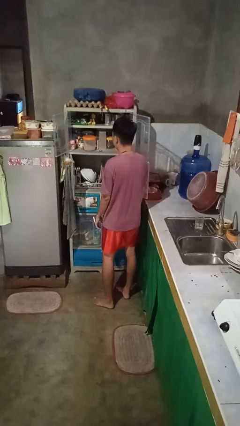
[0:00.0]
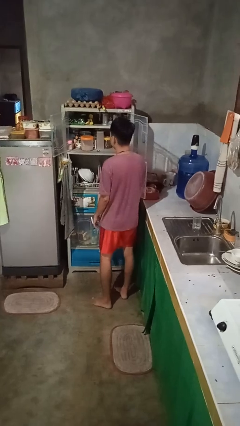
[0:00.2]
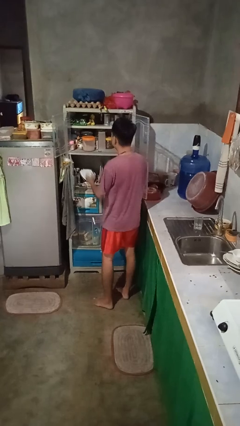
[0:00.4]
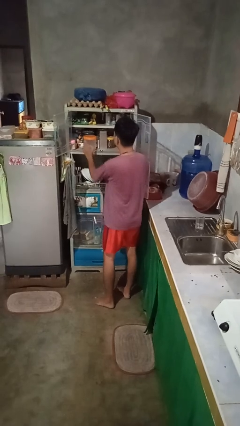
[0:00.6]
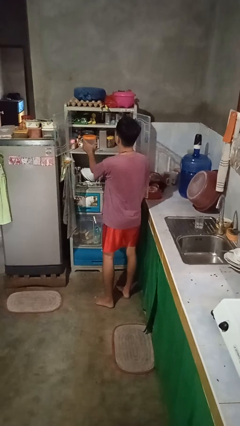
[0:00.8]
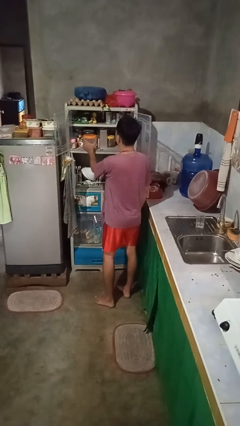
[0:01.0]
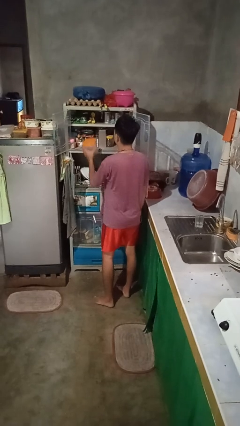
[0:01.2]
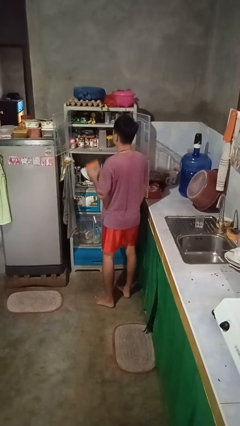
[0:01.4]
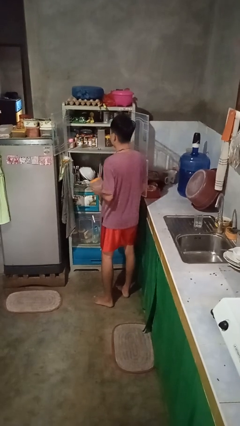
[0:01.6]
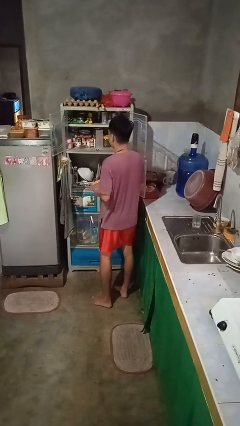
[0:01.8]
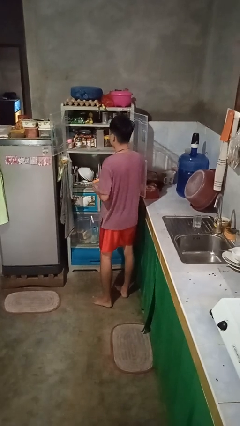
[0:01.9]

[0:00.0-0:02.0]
person takes object from cabinet

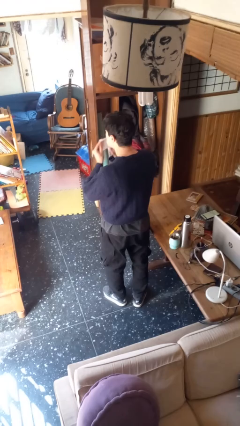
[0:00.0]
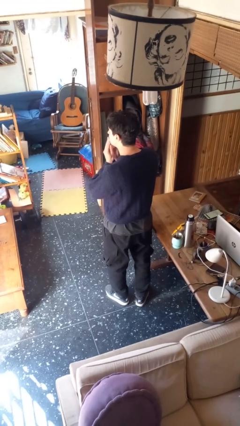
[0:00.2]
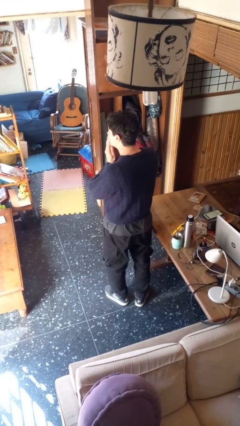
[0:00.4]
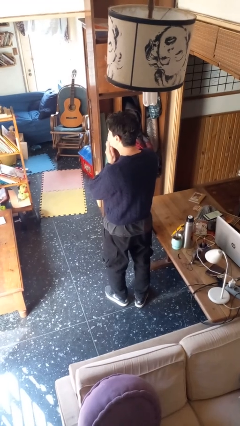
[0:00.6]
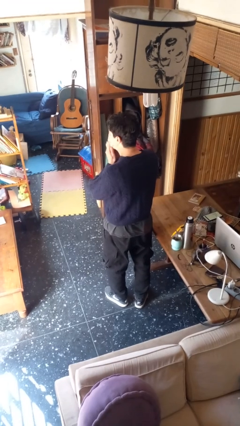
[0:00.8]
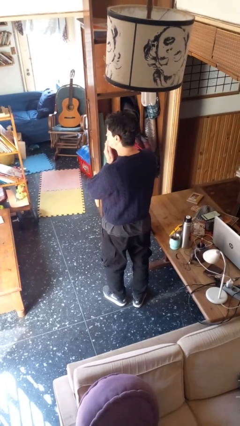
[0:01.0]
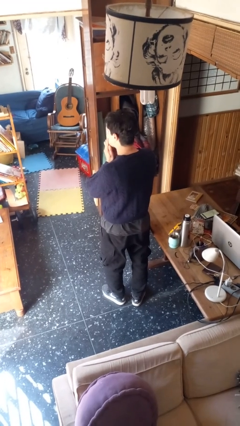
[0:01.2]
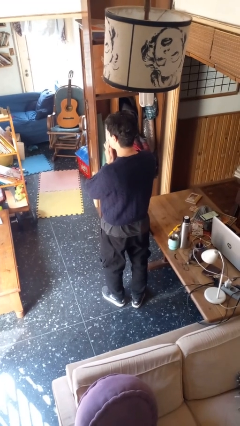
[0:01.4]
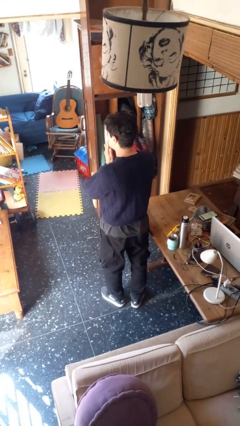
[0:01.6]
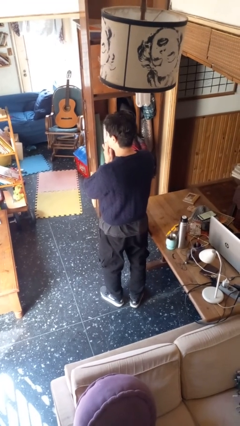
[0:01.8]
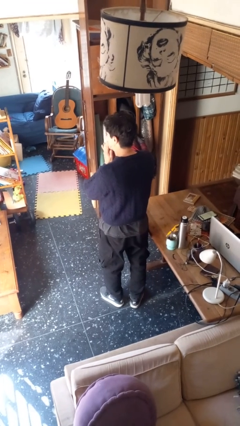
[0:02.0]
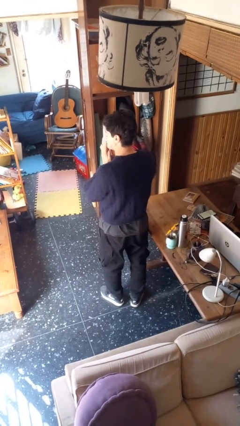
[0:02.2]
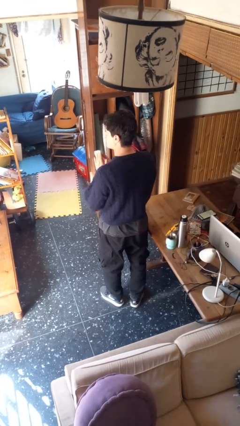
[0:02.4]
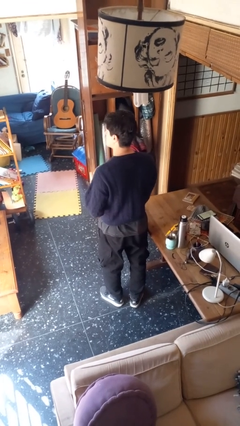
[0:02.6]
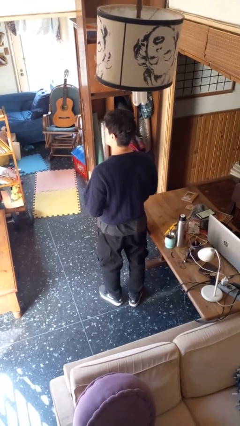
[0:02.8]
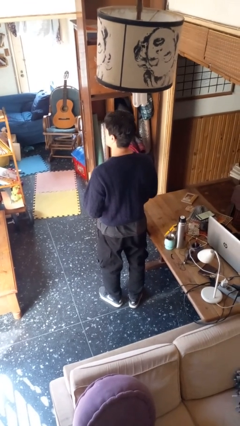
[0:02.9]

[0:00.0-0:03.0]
person wipes mouth with napkin

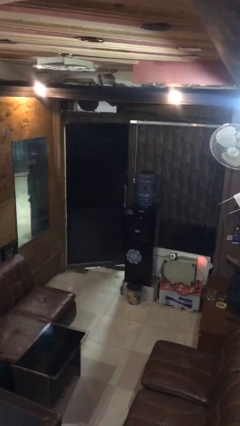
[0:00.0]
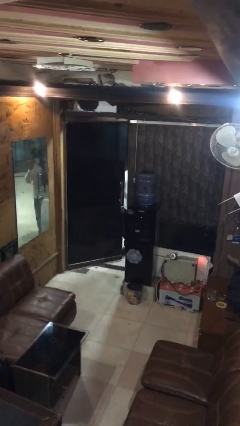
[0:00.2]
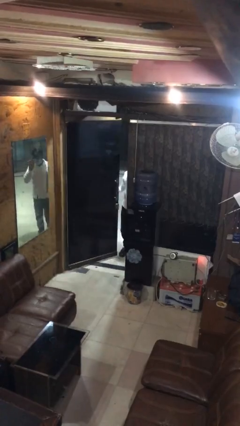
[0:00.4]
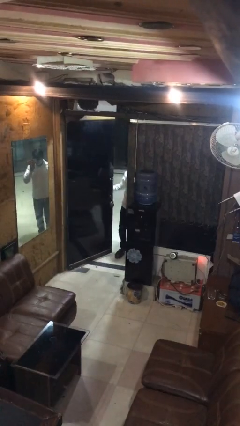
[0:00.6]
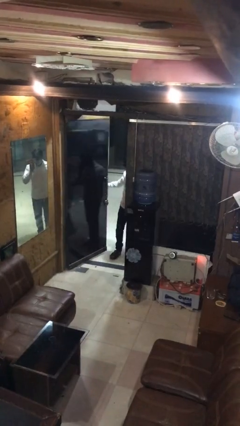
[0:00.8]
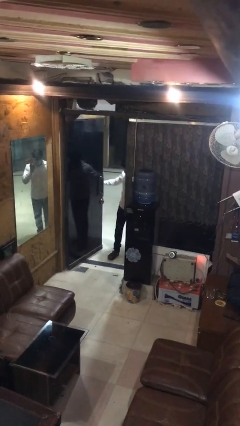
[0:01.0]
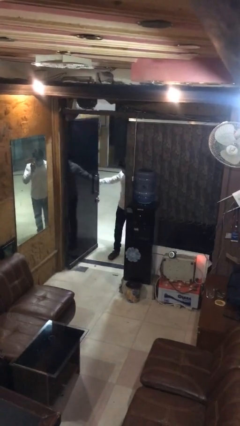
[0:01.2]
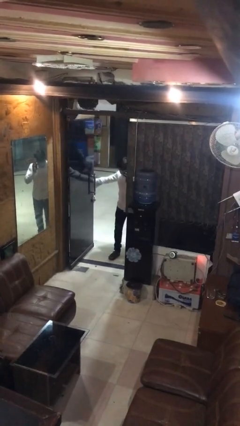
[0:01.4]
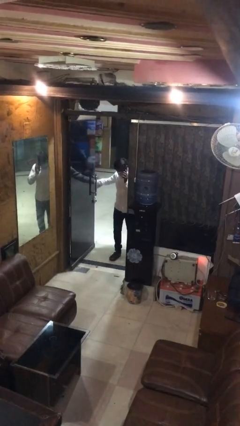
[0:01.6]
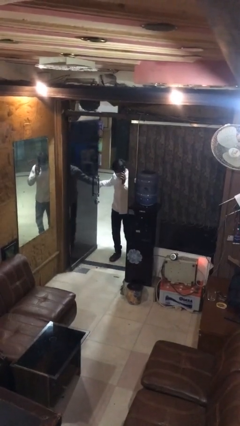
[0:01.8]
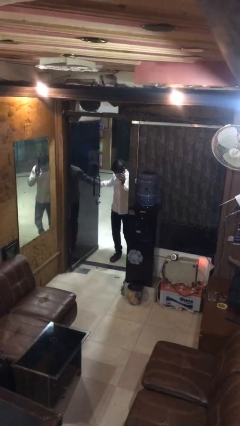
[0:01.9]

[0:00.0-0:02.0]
person opens facility door

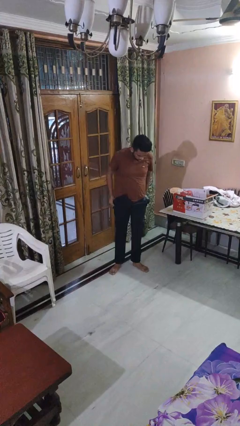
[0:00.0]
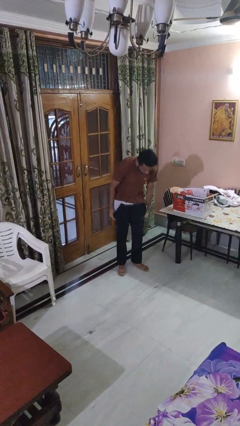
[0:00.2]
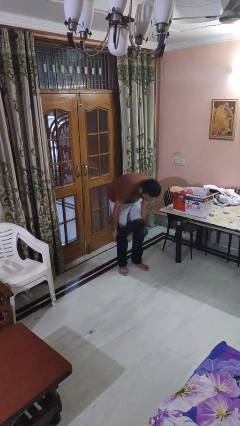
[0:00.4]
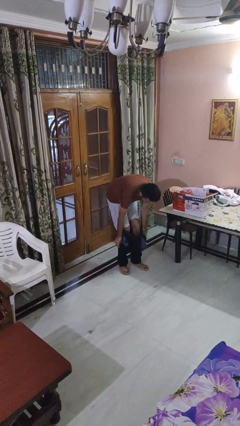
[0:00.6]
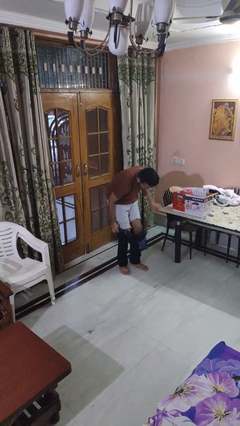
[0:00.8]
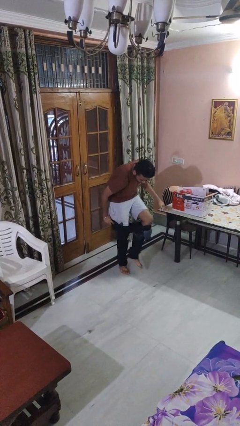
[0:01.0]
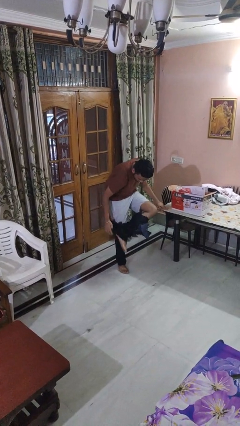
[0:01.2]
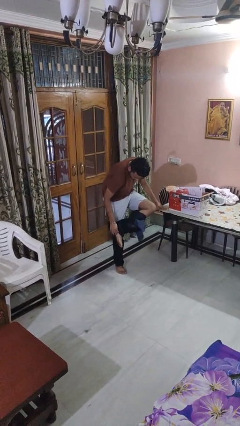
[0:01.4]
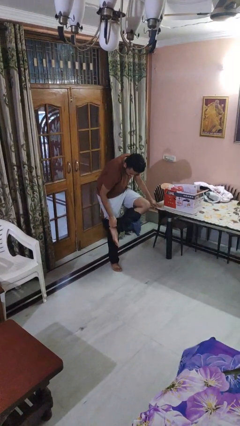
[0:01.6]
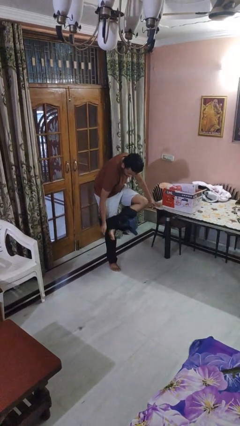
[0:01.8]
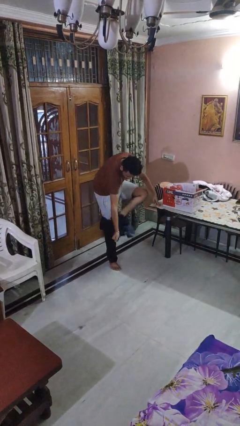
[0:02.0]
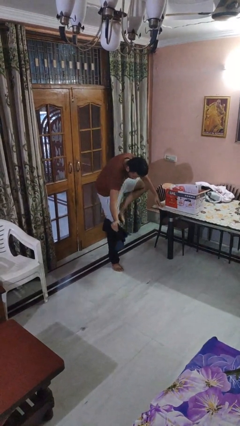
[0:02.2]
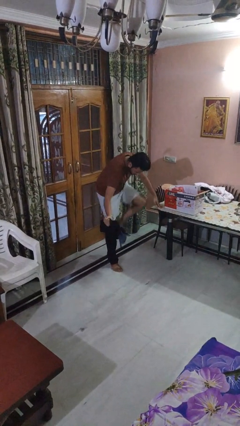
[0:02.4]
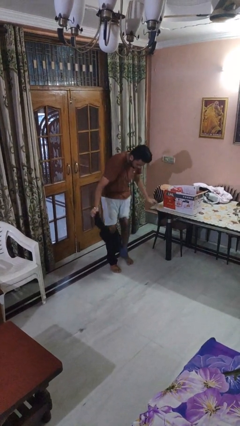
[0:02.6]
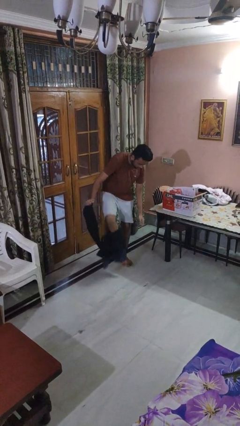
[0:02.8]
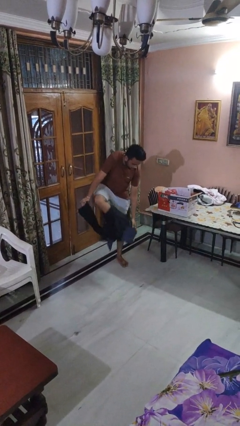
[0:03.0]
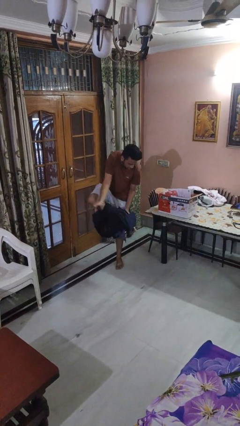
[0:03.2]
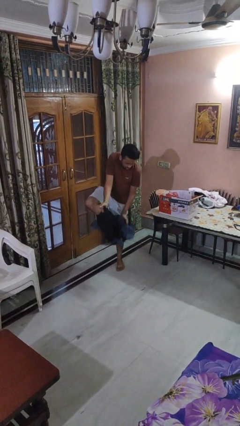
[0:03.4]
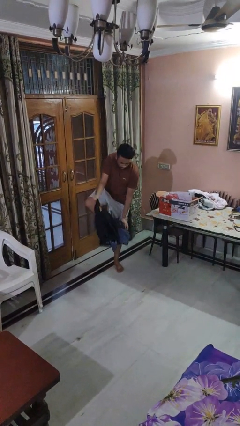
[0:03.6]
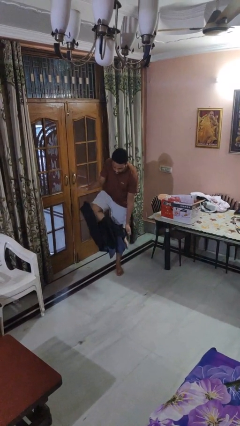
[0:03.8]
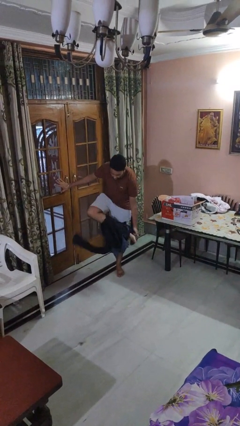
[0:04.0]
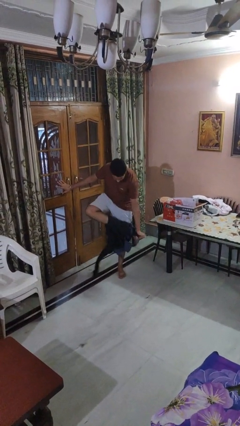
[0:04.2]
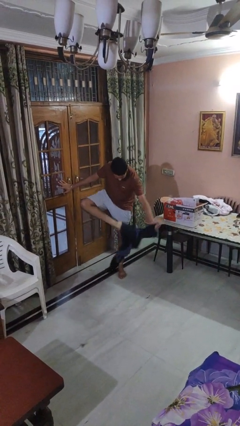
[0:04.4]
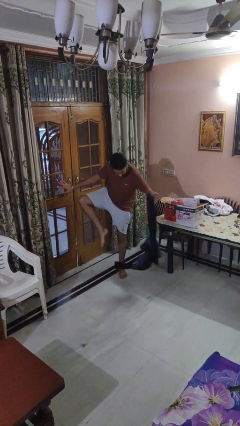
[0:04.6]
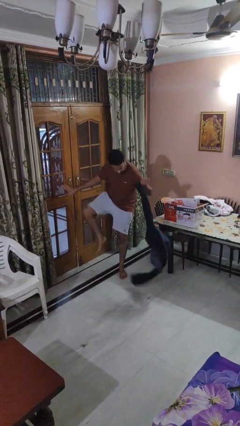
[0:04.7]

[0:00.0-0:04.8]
person takes off pants

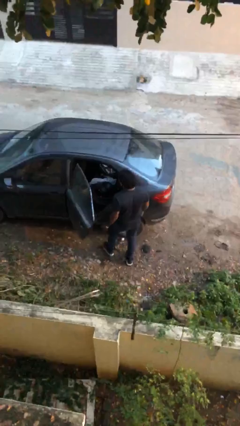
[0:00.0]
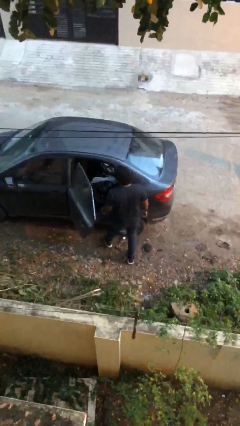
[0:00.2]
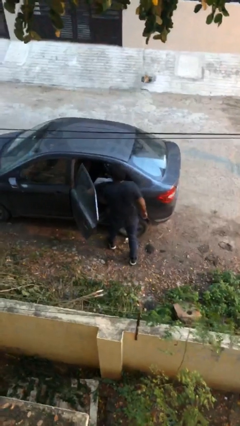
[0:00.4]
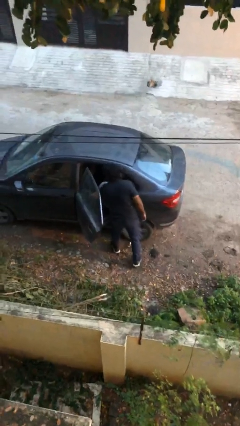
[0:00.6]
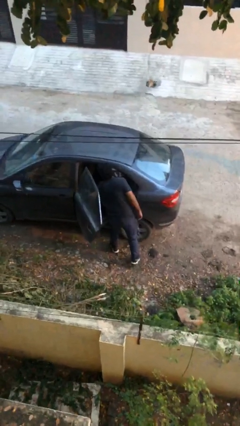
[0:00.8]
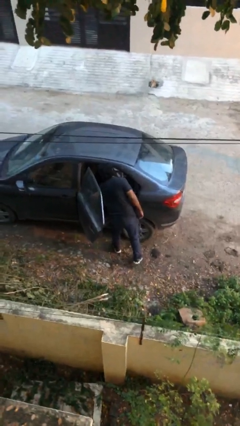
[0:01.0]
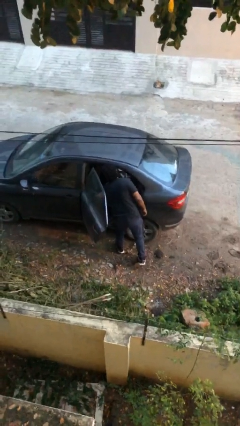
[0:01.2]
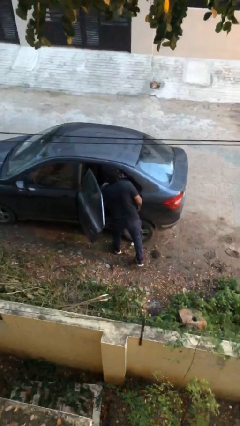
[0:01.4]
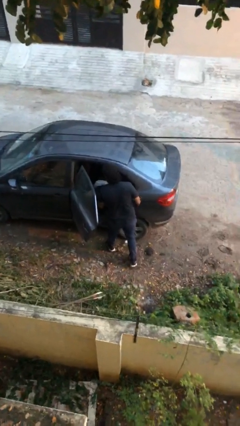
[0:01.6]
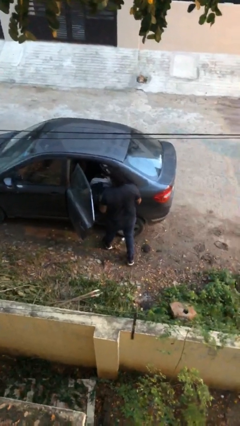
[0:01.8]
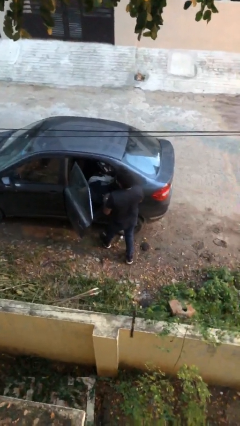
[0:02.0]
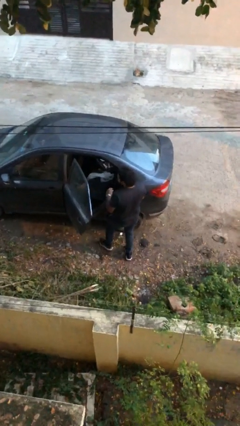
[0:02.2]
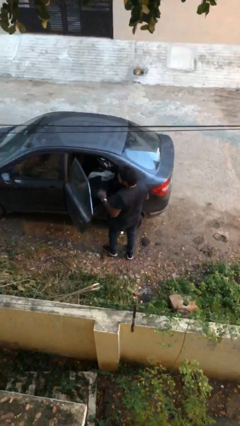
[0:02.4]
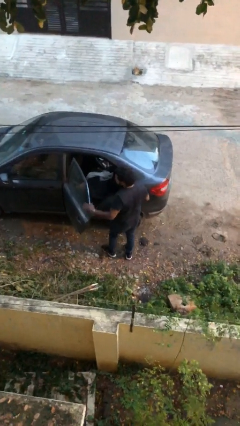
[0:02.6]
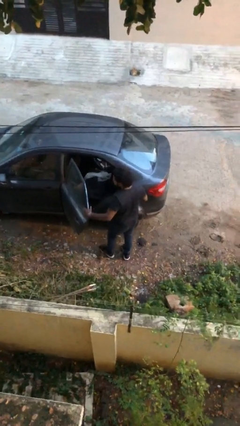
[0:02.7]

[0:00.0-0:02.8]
person unloads car

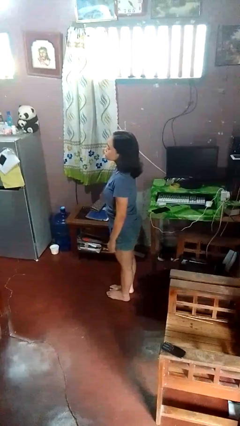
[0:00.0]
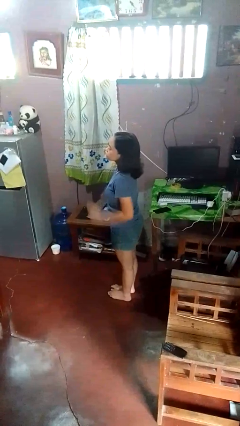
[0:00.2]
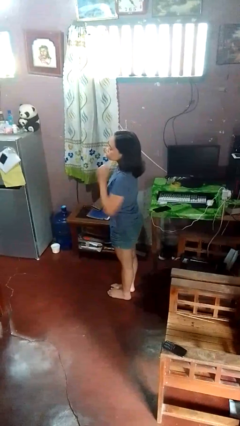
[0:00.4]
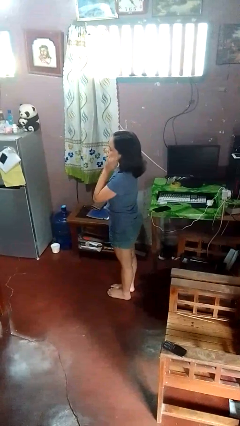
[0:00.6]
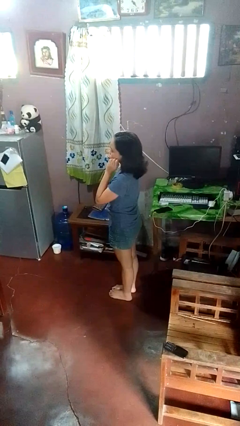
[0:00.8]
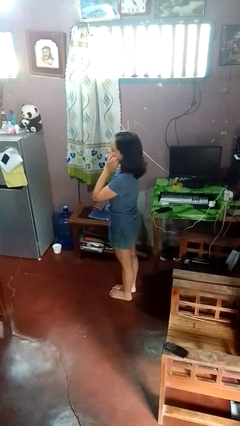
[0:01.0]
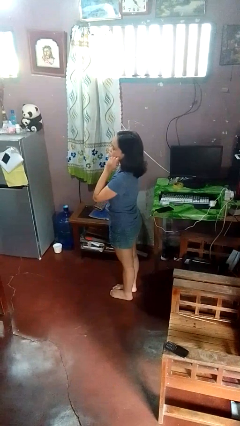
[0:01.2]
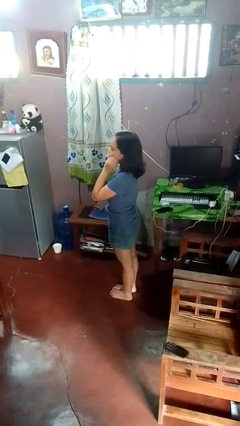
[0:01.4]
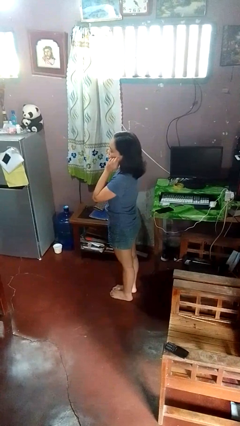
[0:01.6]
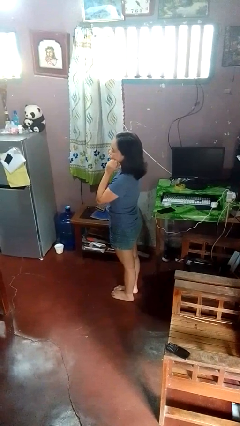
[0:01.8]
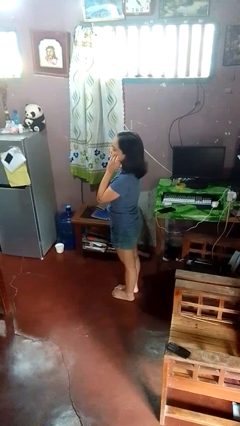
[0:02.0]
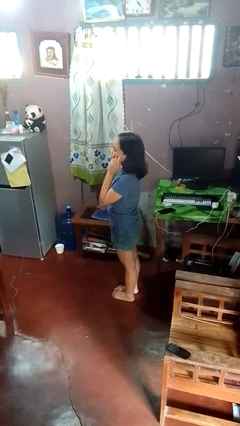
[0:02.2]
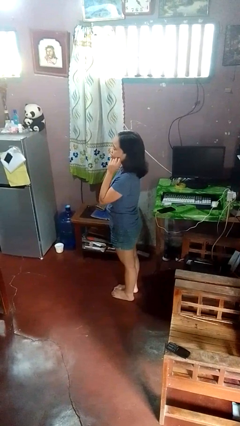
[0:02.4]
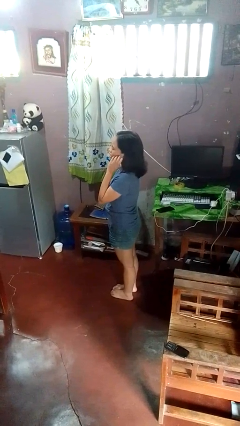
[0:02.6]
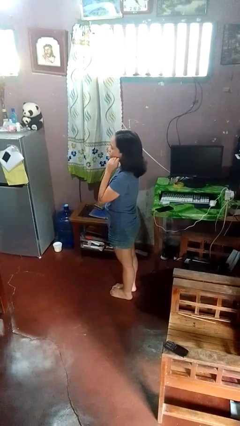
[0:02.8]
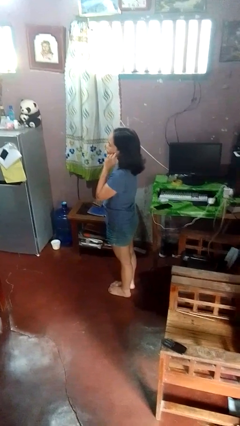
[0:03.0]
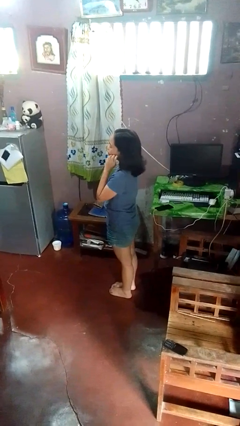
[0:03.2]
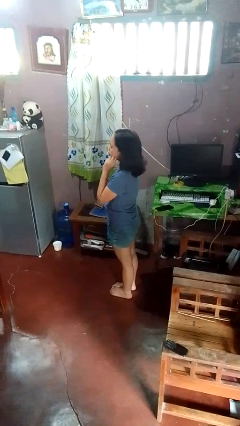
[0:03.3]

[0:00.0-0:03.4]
person scratches face
